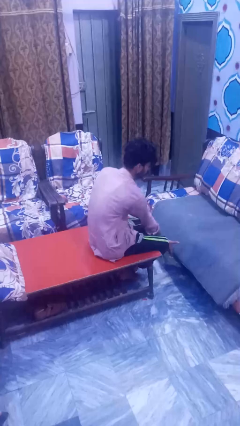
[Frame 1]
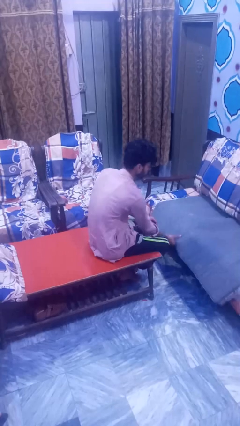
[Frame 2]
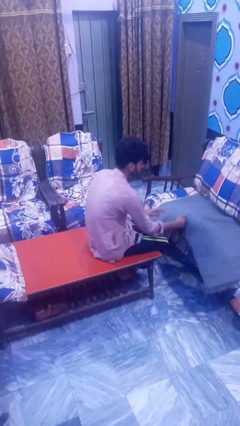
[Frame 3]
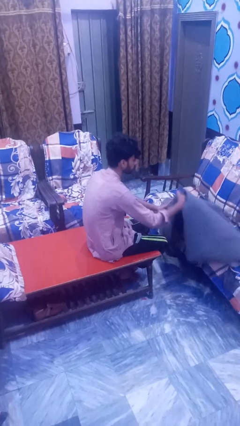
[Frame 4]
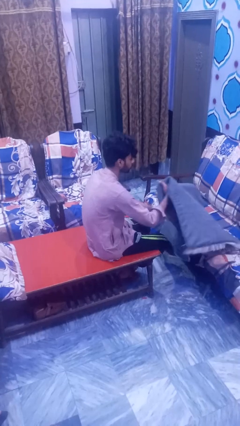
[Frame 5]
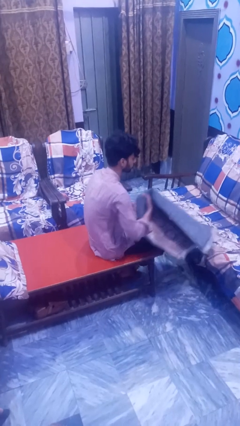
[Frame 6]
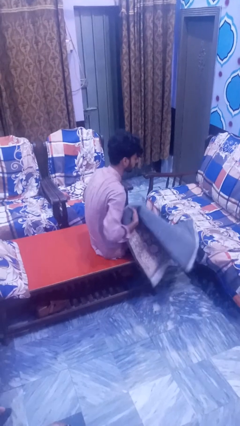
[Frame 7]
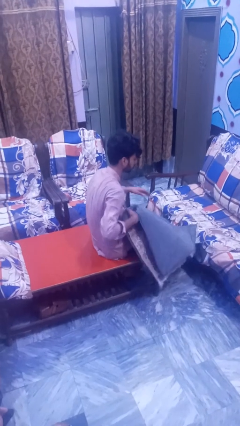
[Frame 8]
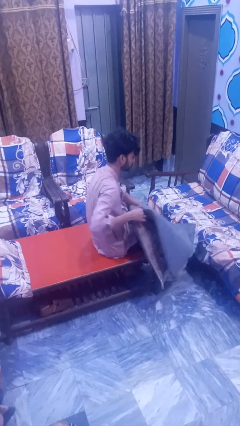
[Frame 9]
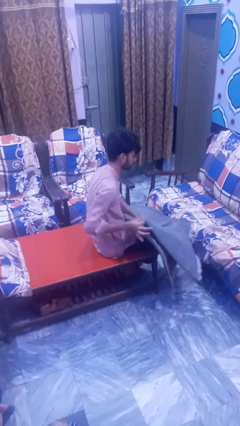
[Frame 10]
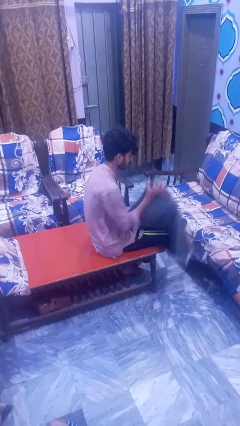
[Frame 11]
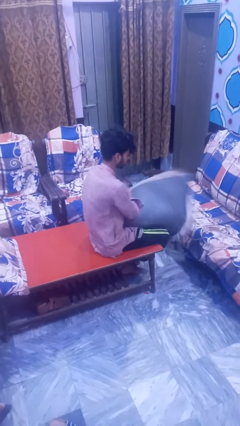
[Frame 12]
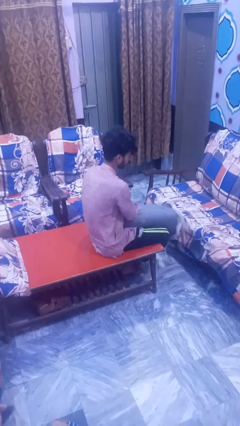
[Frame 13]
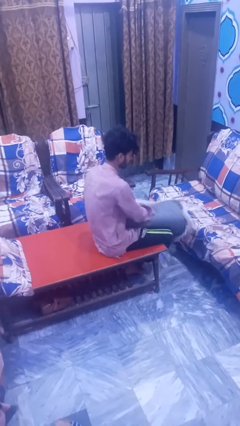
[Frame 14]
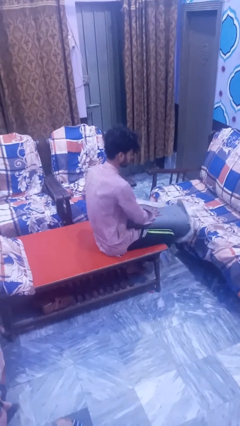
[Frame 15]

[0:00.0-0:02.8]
person folds blanket

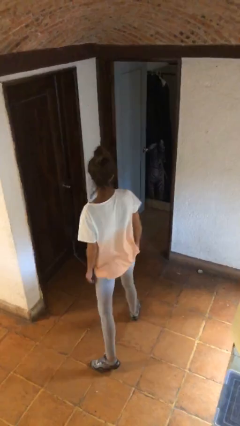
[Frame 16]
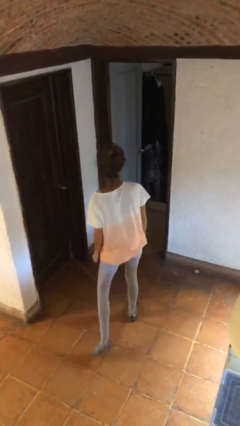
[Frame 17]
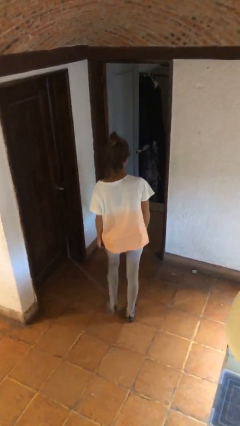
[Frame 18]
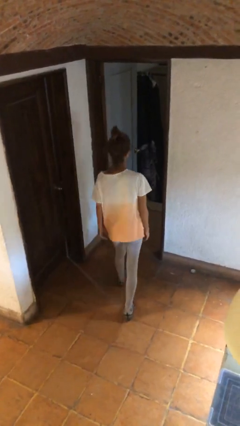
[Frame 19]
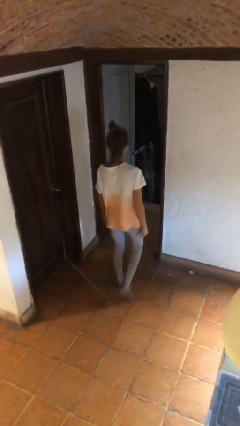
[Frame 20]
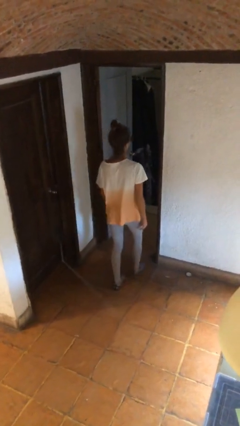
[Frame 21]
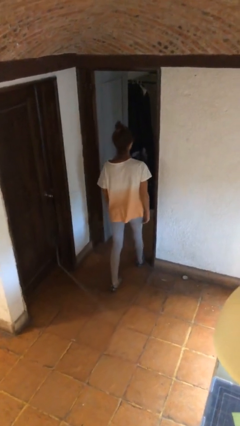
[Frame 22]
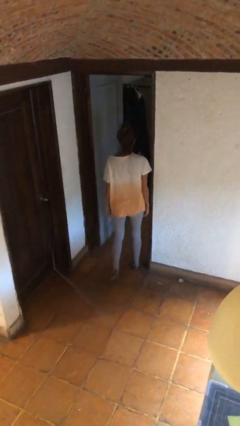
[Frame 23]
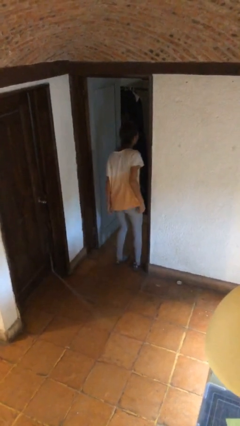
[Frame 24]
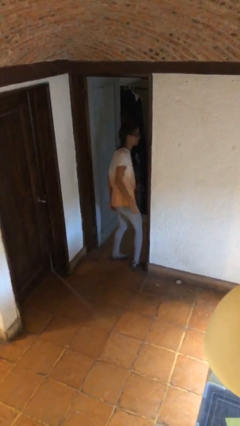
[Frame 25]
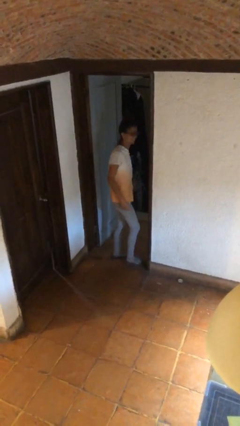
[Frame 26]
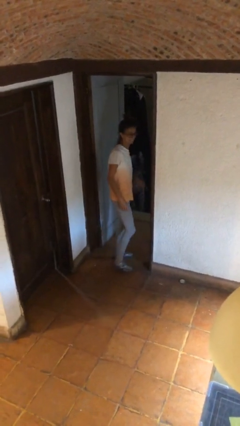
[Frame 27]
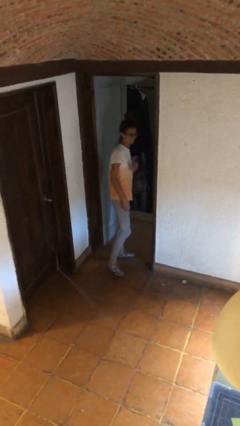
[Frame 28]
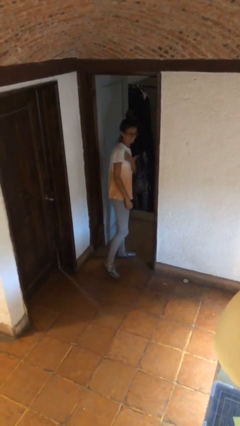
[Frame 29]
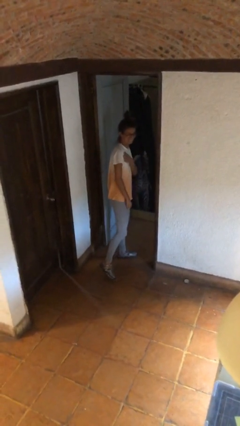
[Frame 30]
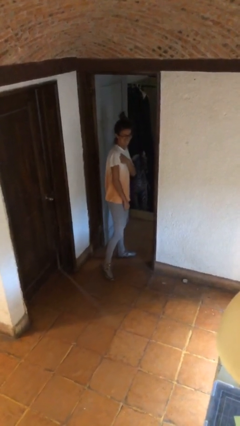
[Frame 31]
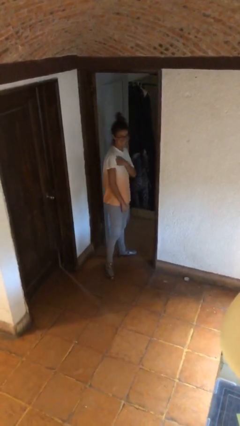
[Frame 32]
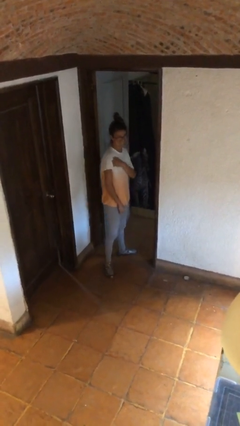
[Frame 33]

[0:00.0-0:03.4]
person bumps into wall

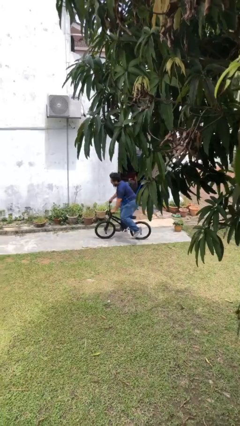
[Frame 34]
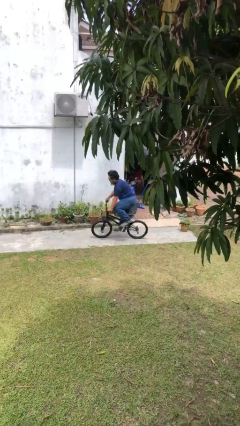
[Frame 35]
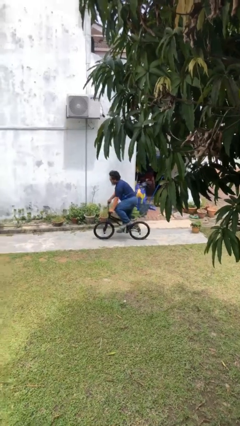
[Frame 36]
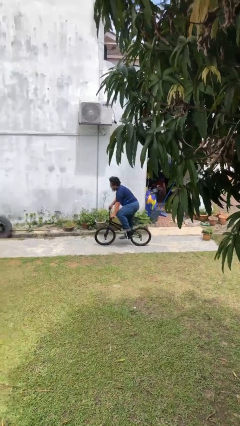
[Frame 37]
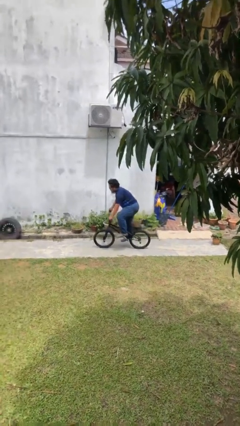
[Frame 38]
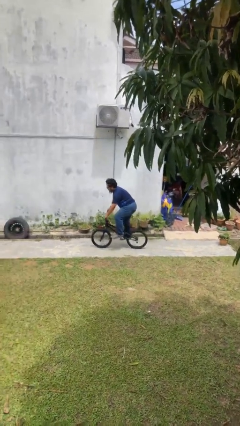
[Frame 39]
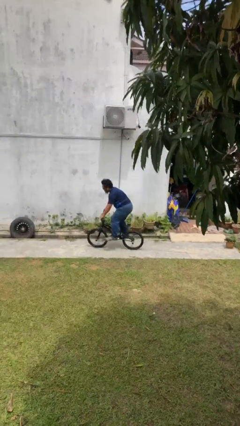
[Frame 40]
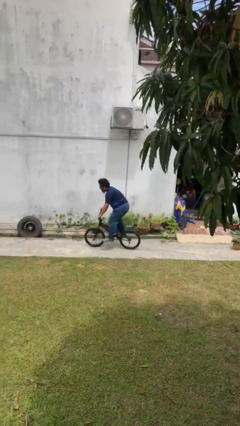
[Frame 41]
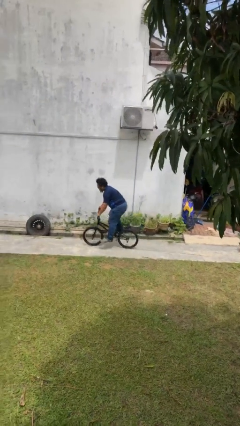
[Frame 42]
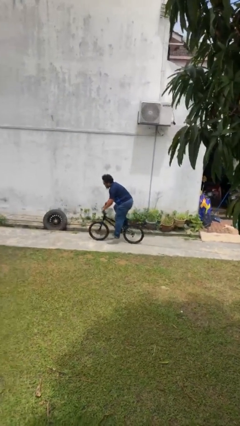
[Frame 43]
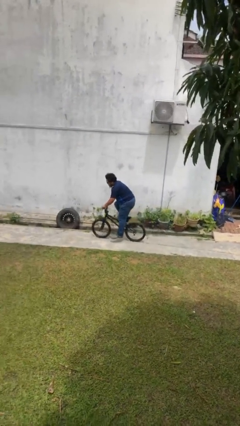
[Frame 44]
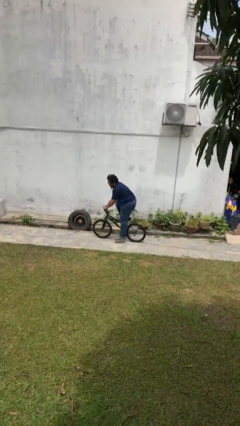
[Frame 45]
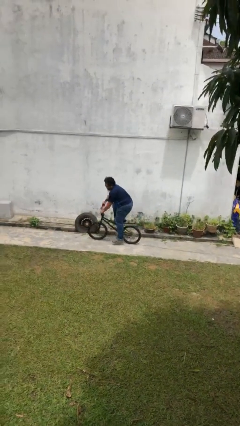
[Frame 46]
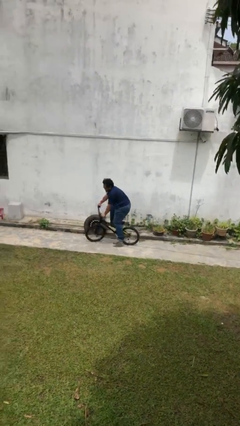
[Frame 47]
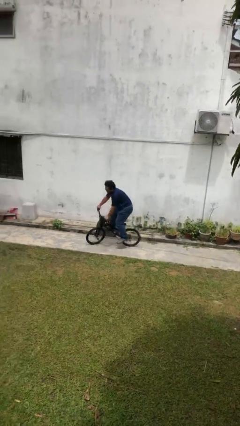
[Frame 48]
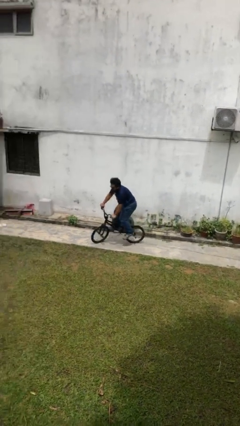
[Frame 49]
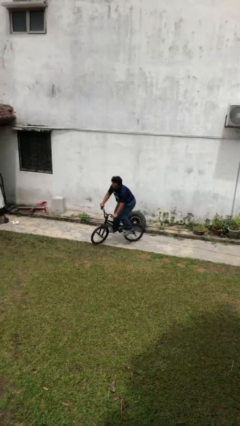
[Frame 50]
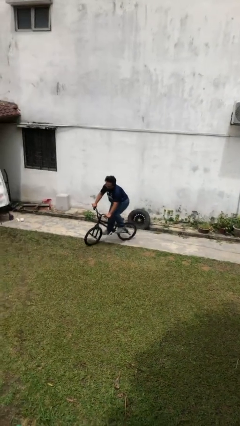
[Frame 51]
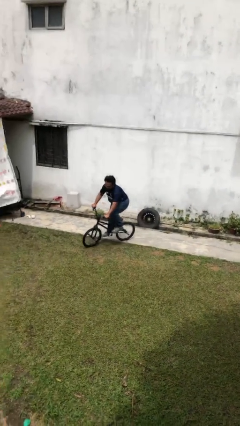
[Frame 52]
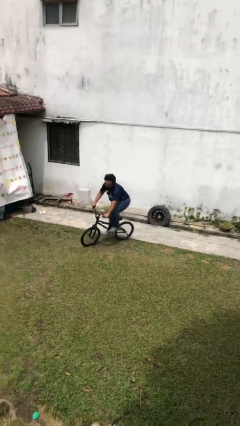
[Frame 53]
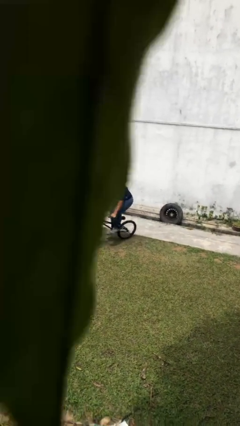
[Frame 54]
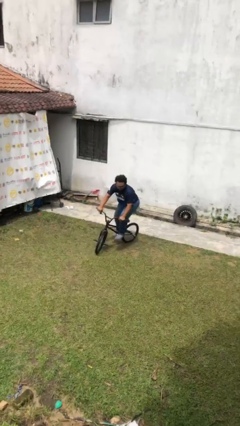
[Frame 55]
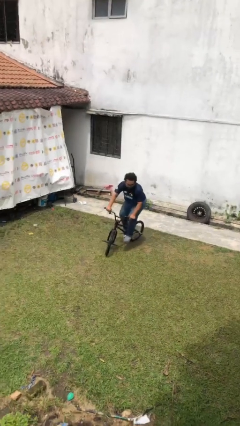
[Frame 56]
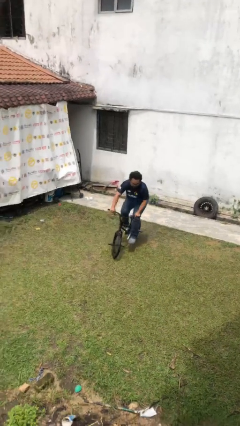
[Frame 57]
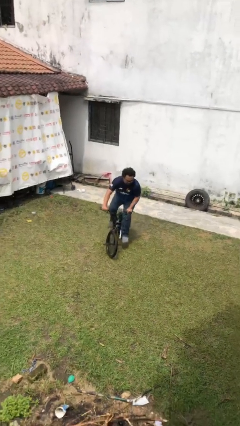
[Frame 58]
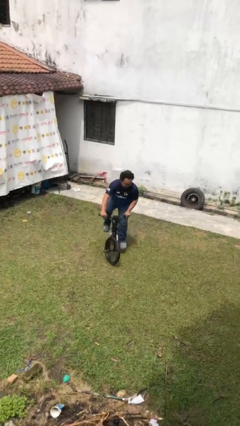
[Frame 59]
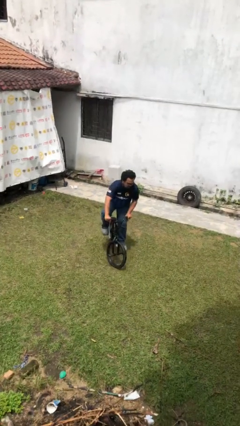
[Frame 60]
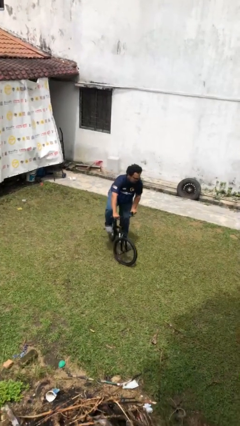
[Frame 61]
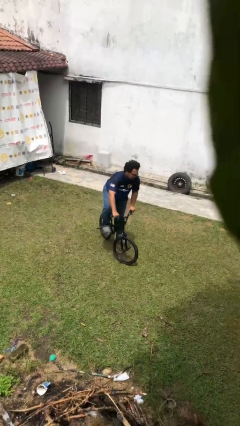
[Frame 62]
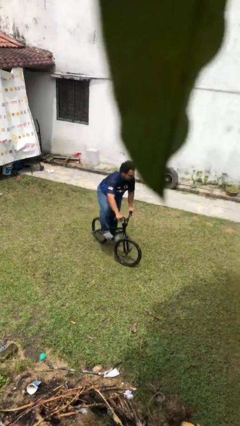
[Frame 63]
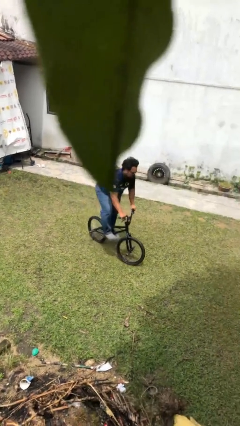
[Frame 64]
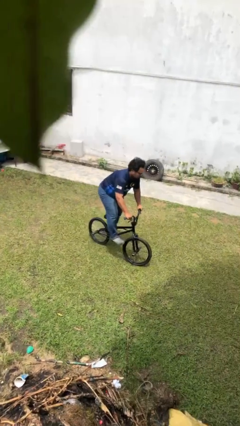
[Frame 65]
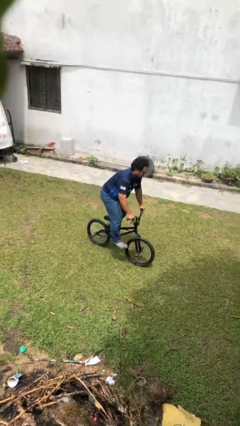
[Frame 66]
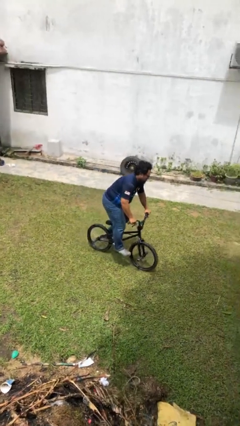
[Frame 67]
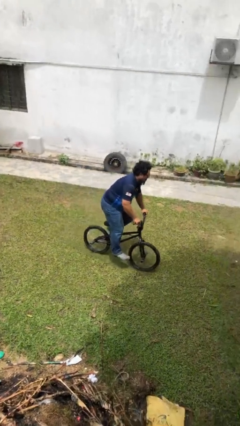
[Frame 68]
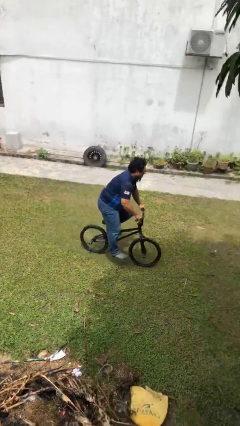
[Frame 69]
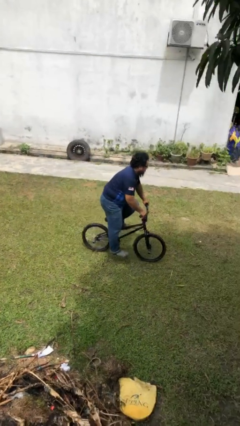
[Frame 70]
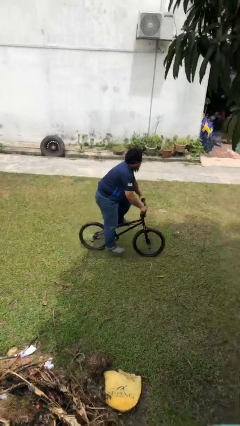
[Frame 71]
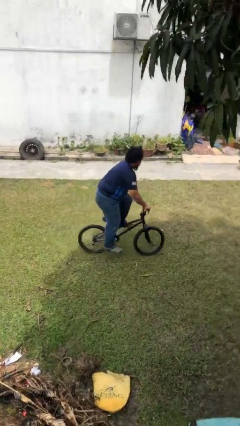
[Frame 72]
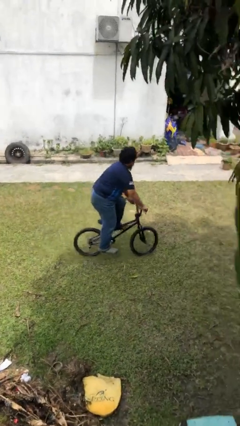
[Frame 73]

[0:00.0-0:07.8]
person rides bicycle

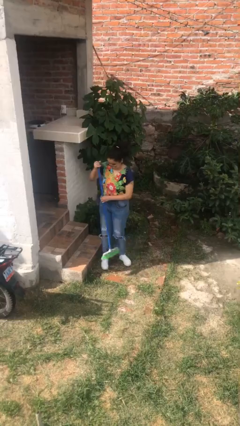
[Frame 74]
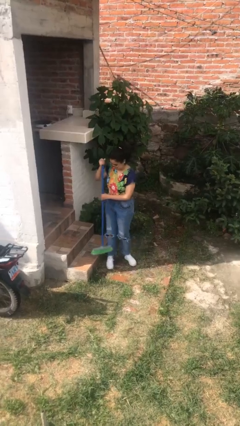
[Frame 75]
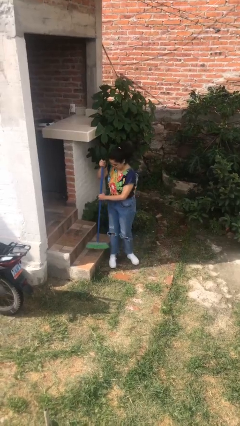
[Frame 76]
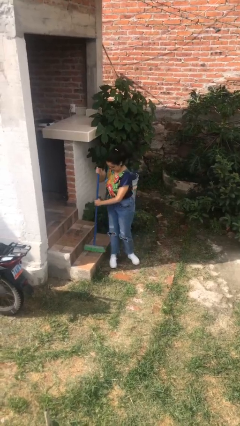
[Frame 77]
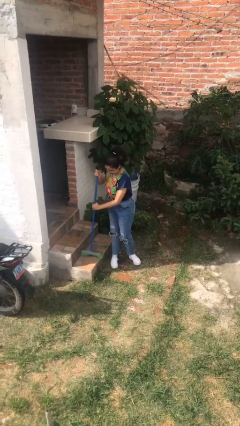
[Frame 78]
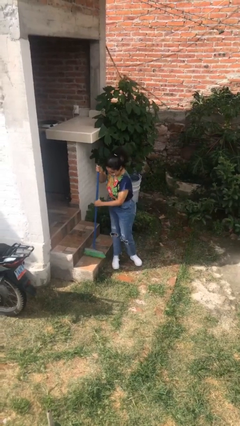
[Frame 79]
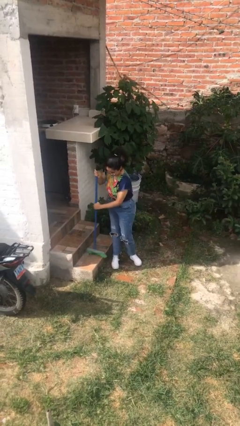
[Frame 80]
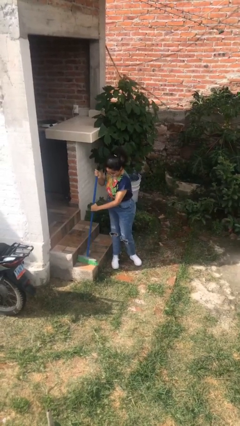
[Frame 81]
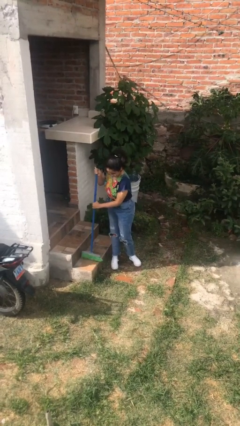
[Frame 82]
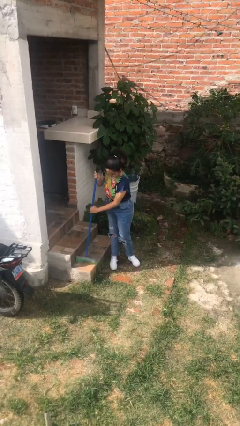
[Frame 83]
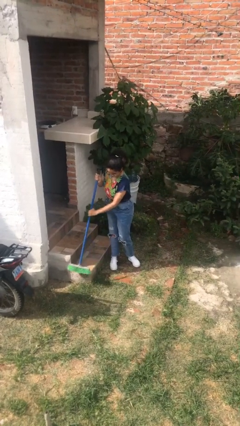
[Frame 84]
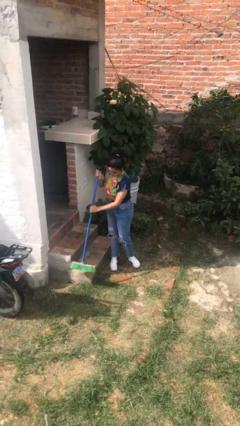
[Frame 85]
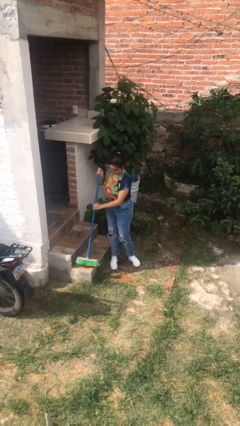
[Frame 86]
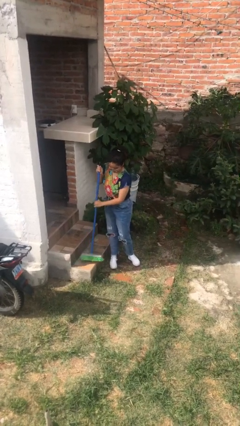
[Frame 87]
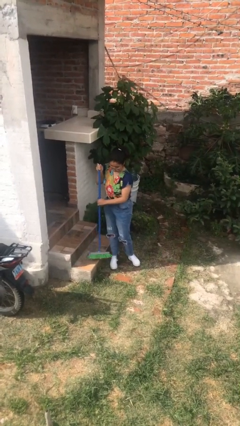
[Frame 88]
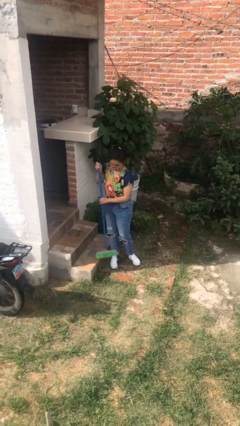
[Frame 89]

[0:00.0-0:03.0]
person sweeps floor

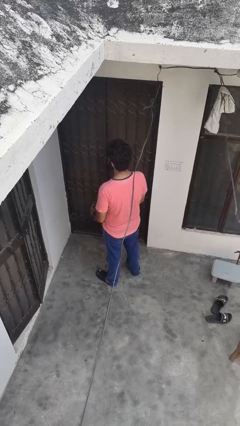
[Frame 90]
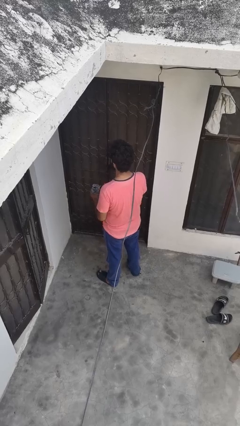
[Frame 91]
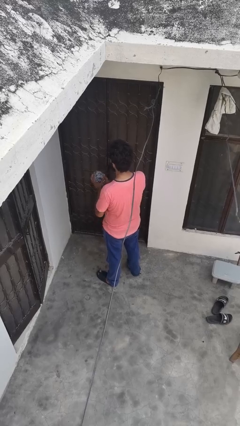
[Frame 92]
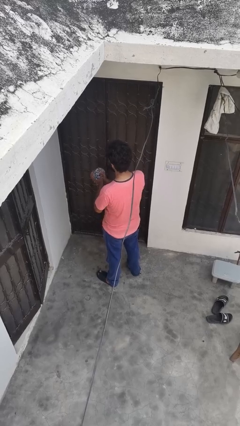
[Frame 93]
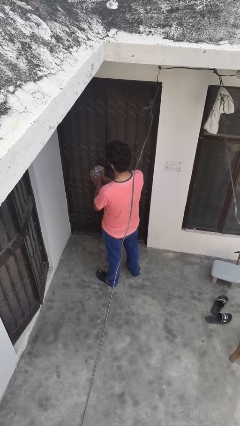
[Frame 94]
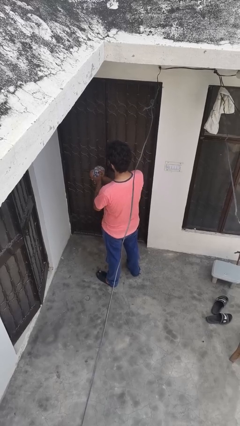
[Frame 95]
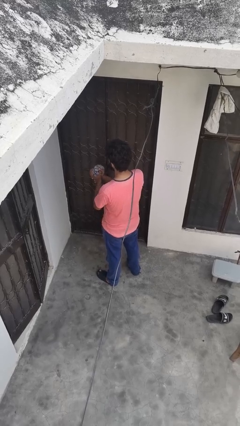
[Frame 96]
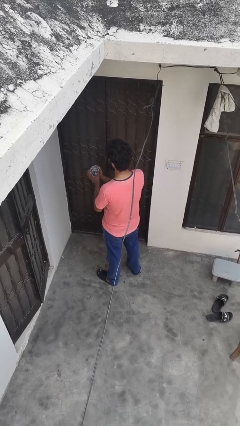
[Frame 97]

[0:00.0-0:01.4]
person squeezes object
